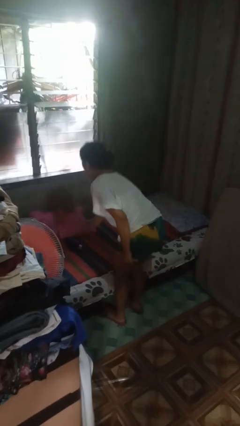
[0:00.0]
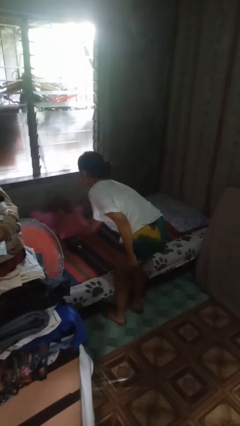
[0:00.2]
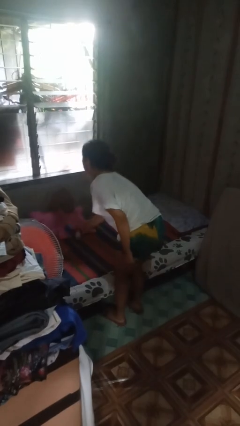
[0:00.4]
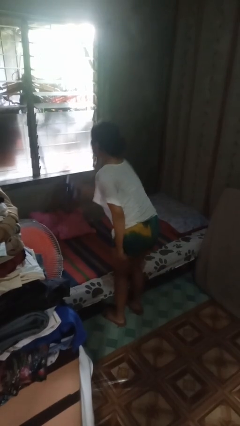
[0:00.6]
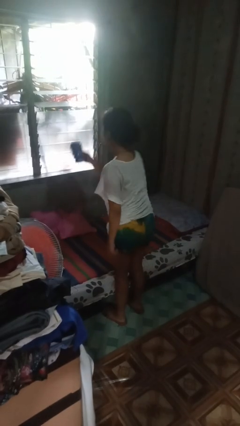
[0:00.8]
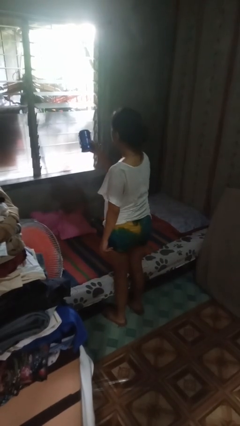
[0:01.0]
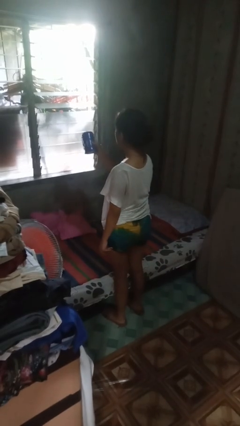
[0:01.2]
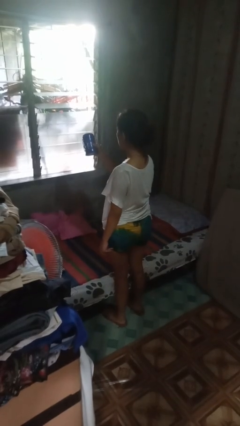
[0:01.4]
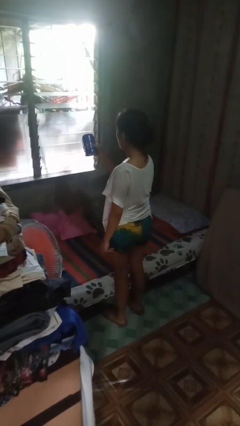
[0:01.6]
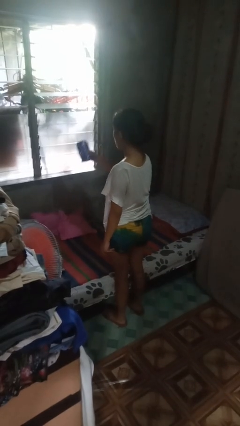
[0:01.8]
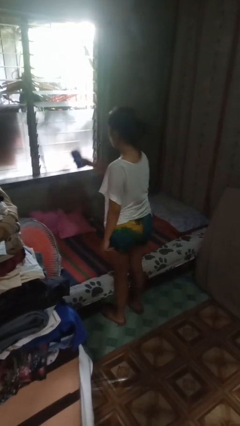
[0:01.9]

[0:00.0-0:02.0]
person picks up object from bed

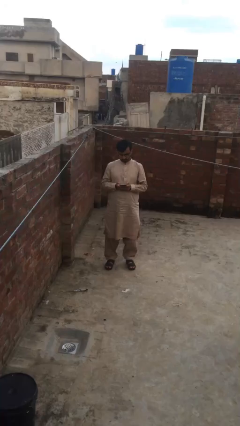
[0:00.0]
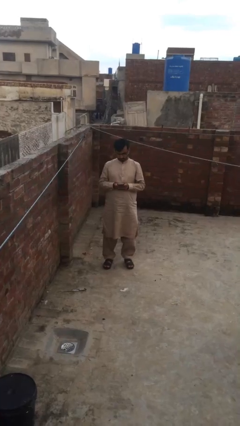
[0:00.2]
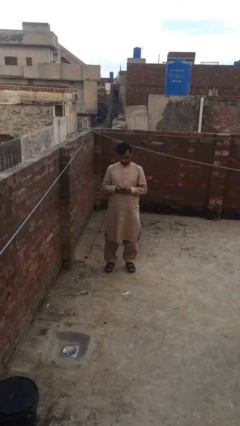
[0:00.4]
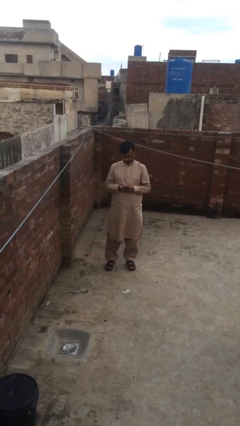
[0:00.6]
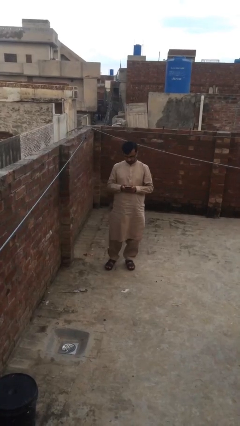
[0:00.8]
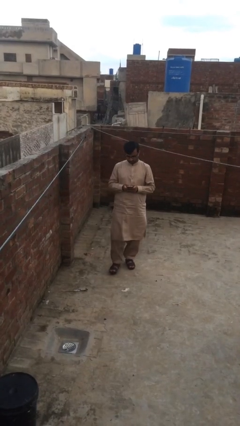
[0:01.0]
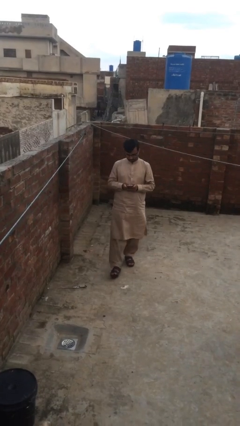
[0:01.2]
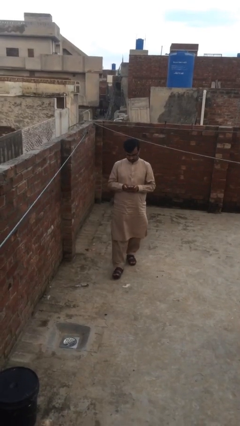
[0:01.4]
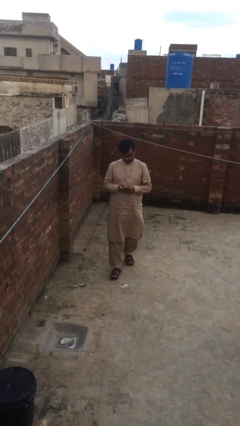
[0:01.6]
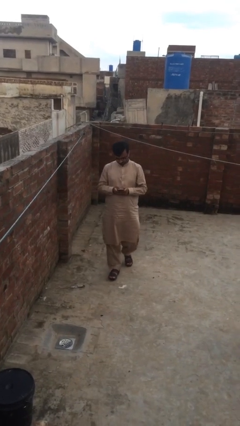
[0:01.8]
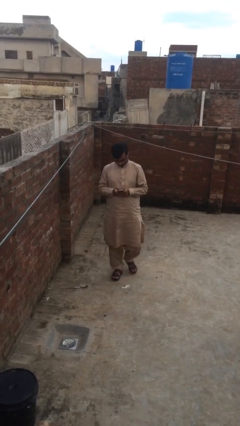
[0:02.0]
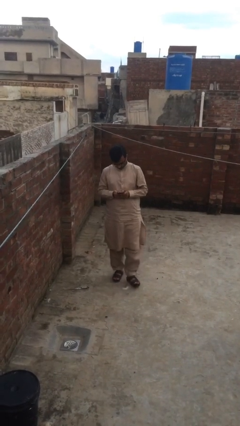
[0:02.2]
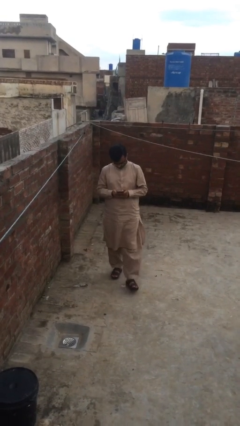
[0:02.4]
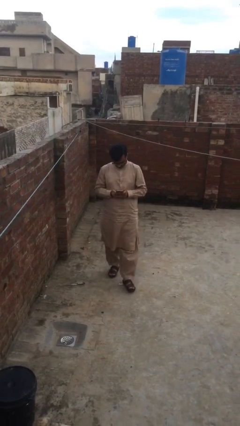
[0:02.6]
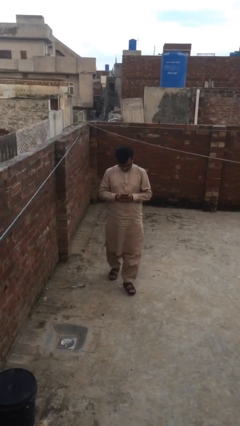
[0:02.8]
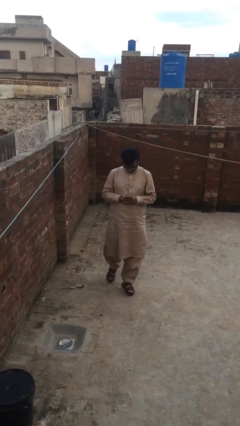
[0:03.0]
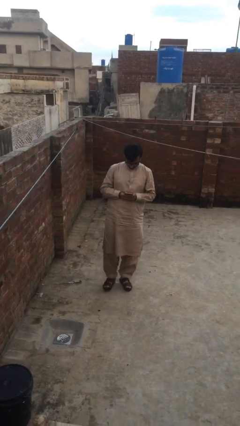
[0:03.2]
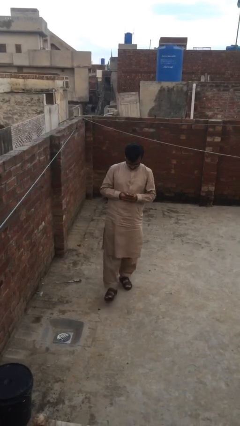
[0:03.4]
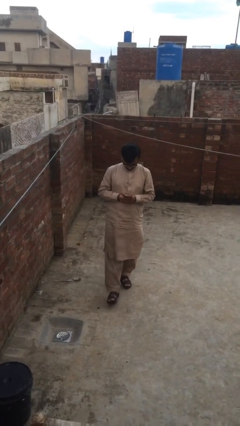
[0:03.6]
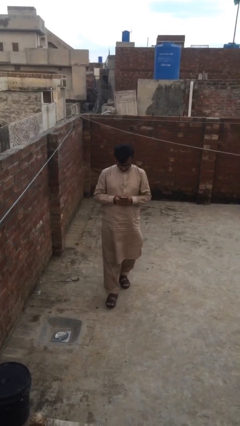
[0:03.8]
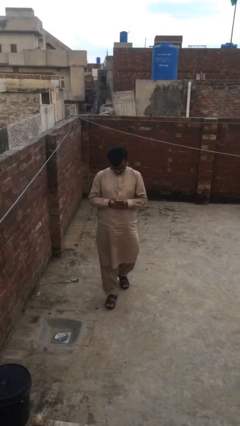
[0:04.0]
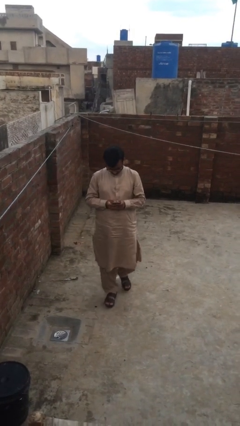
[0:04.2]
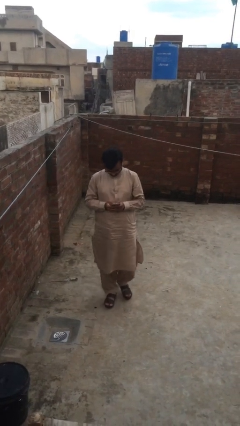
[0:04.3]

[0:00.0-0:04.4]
person texts on phone

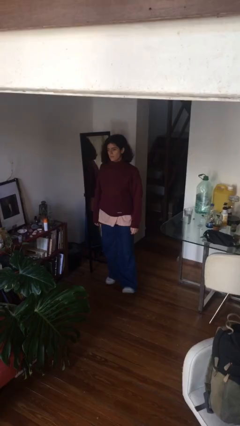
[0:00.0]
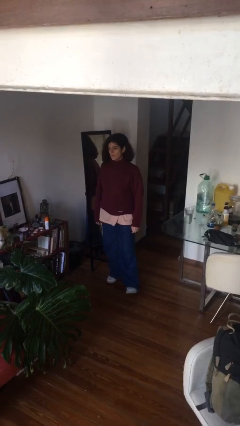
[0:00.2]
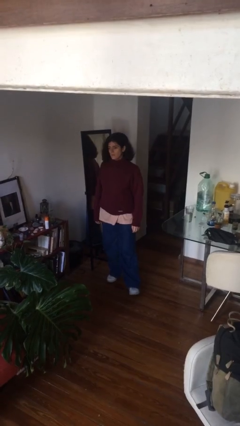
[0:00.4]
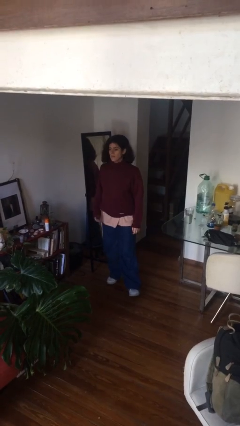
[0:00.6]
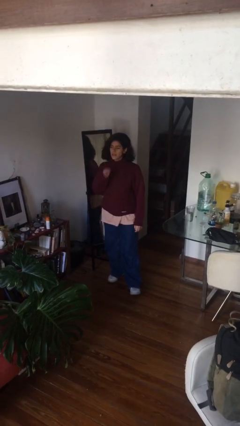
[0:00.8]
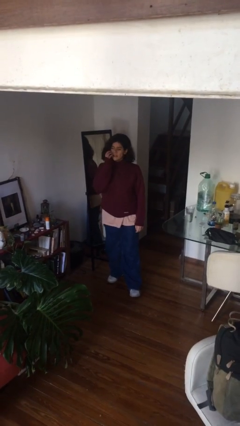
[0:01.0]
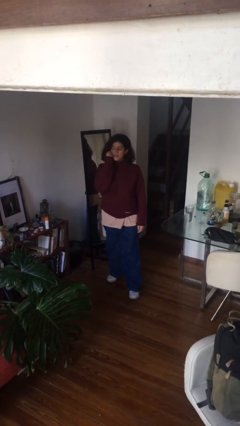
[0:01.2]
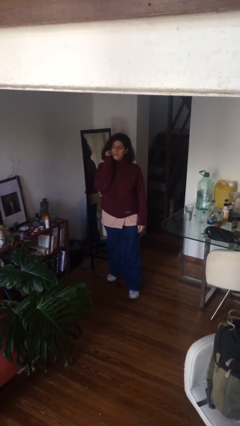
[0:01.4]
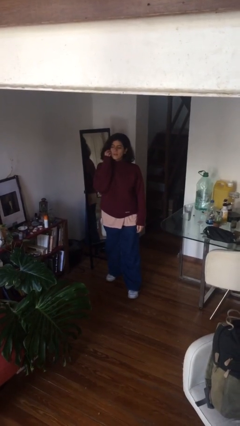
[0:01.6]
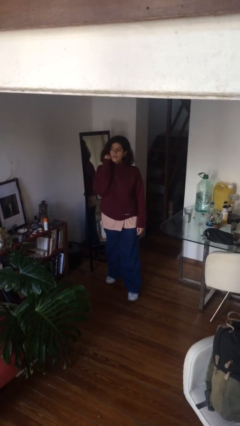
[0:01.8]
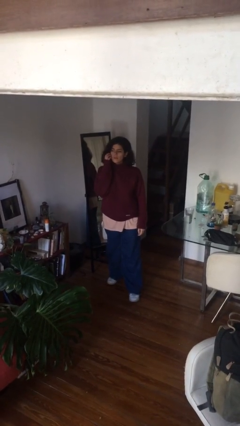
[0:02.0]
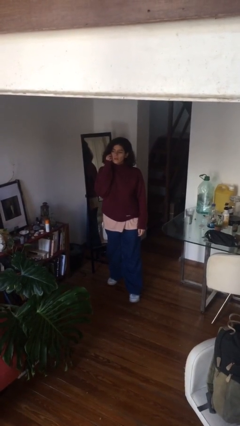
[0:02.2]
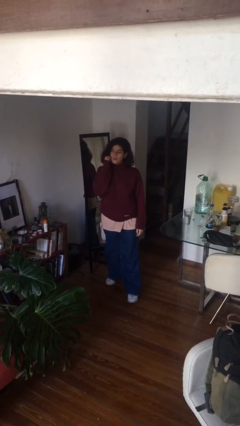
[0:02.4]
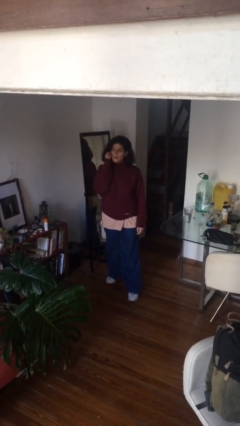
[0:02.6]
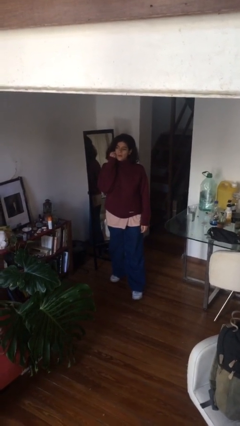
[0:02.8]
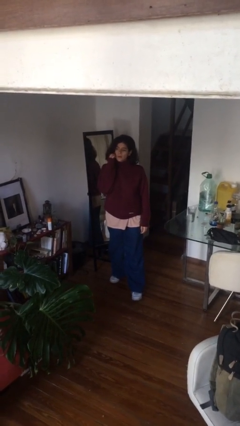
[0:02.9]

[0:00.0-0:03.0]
person scratches face

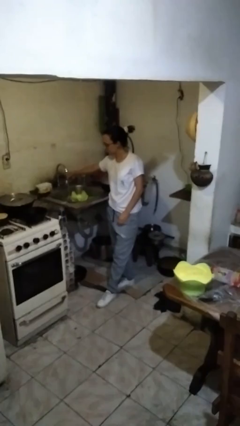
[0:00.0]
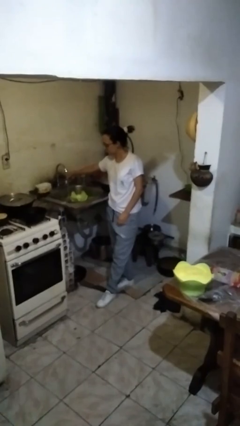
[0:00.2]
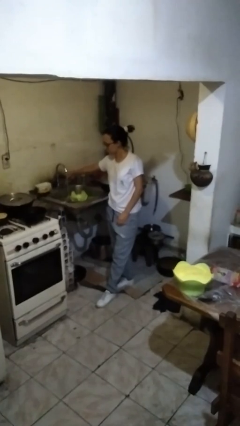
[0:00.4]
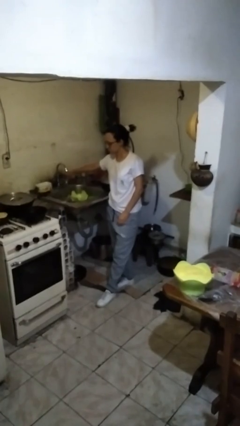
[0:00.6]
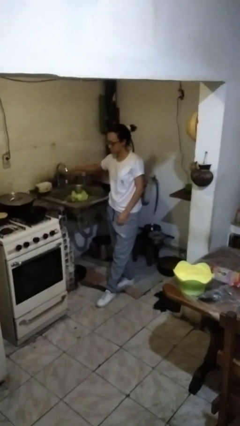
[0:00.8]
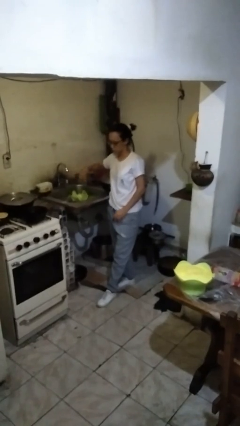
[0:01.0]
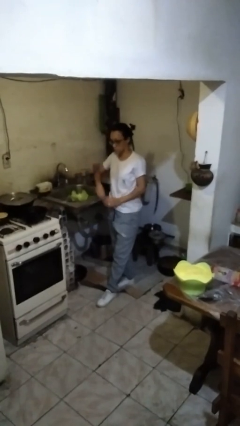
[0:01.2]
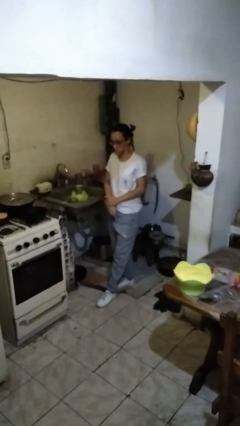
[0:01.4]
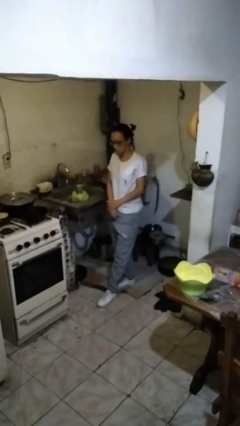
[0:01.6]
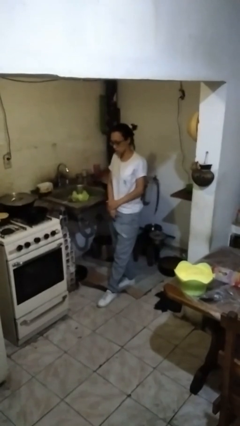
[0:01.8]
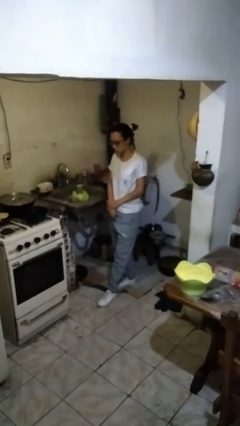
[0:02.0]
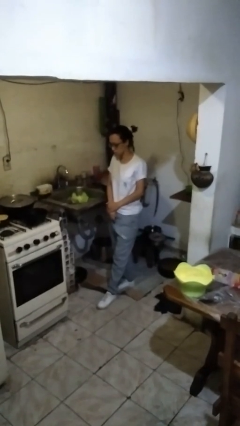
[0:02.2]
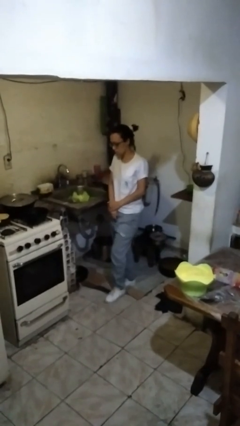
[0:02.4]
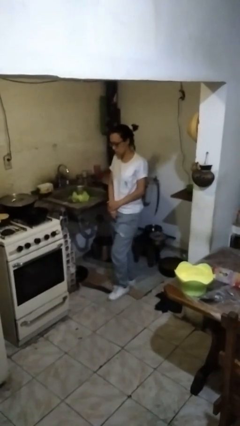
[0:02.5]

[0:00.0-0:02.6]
person turns off faucet

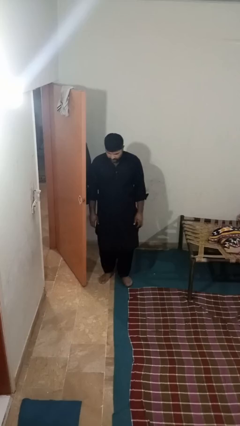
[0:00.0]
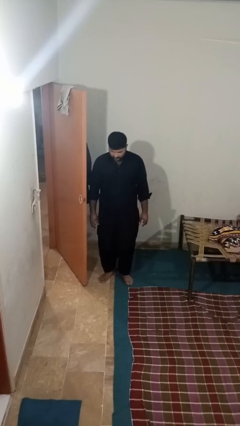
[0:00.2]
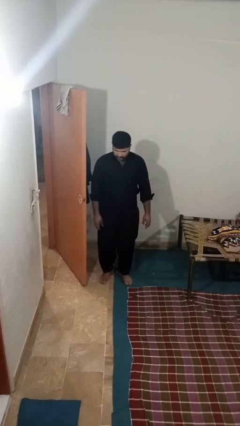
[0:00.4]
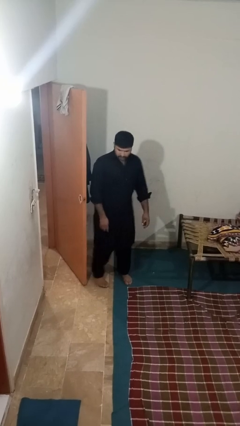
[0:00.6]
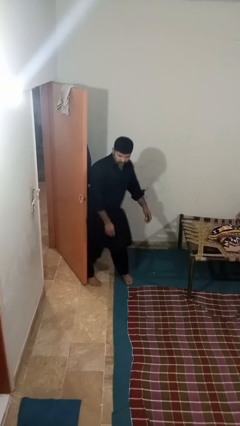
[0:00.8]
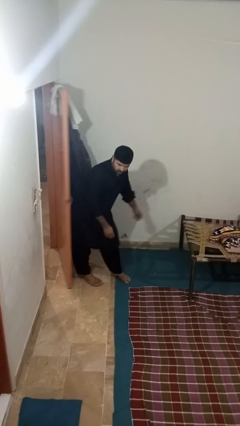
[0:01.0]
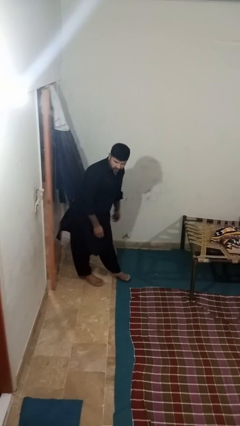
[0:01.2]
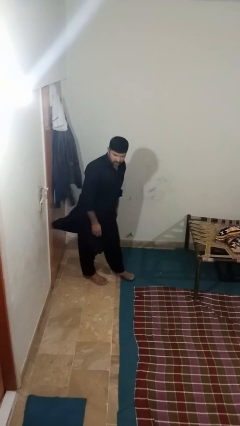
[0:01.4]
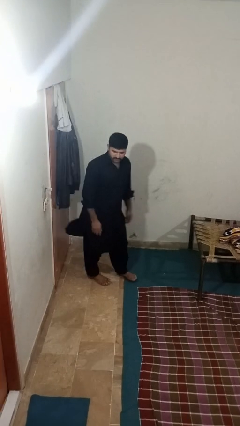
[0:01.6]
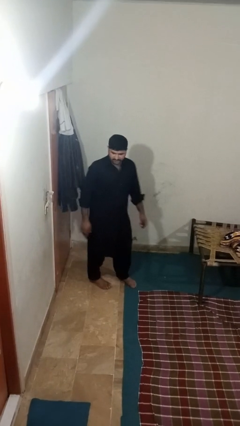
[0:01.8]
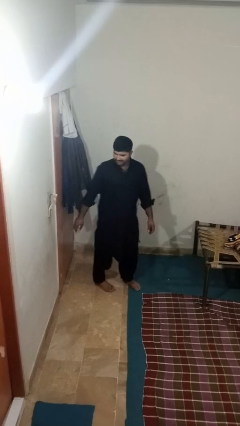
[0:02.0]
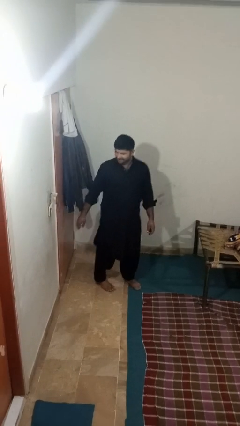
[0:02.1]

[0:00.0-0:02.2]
person closes door with hip

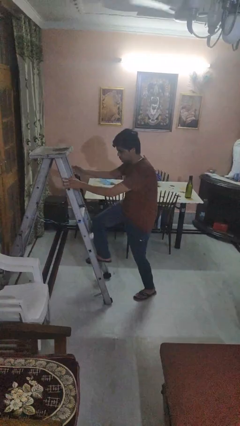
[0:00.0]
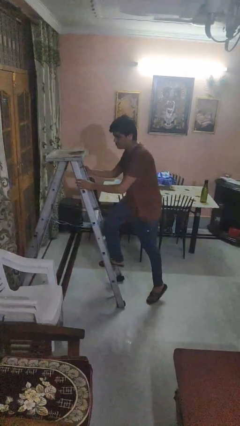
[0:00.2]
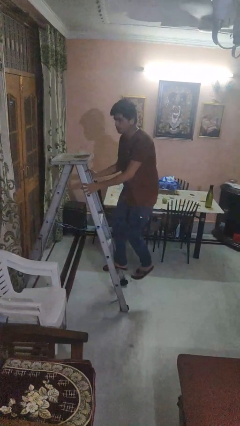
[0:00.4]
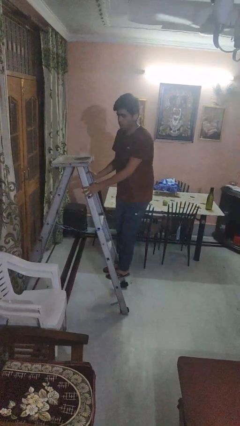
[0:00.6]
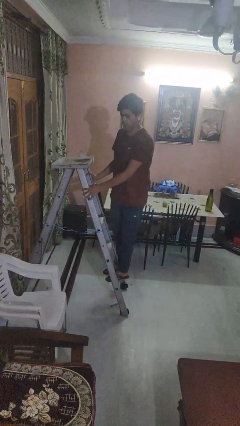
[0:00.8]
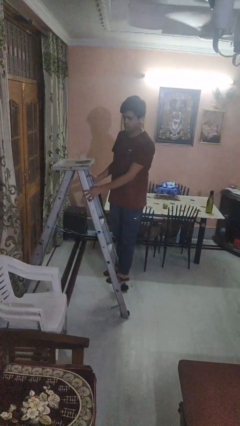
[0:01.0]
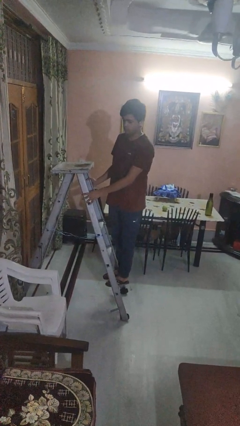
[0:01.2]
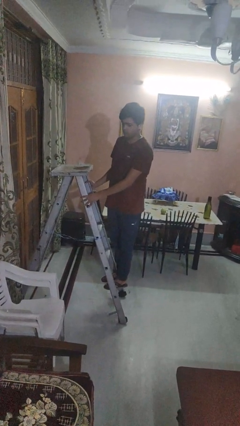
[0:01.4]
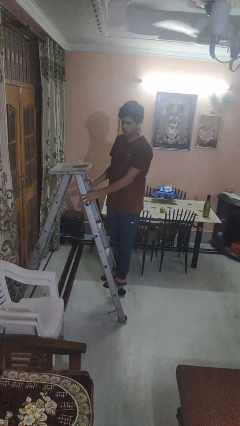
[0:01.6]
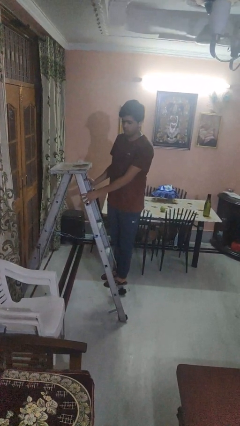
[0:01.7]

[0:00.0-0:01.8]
person climbs up ladder

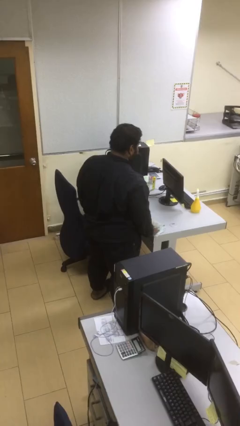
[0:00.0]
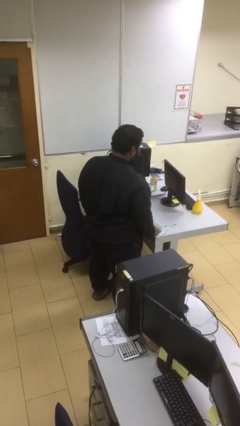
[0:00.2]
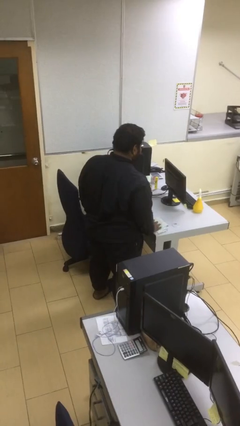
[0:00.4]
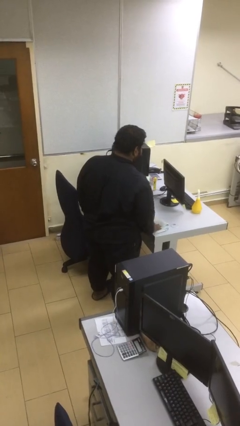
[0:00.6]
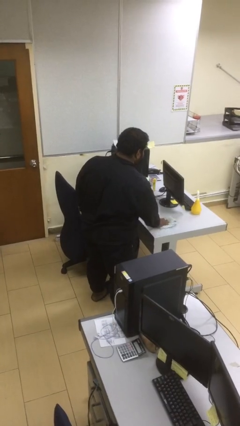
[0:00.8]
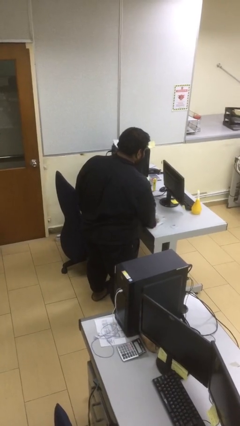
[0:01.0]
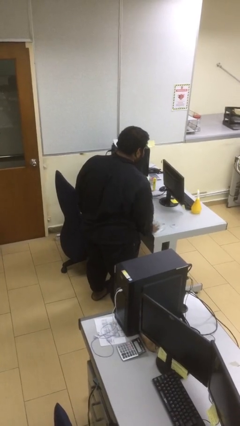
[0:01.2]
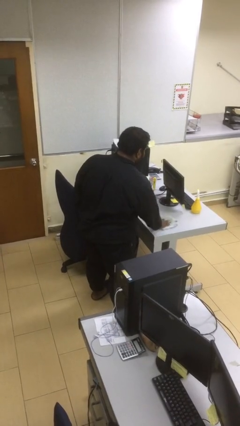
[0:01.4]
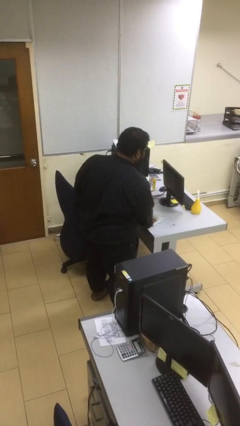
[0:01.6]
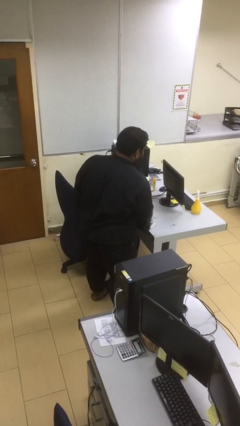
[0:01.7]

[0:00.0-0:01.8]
person cleans table with rag
